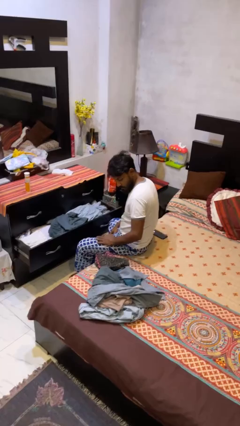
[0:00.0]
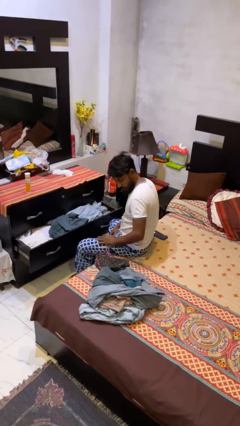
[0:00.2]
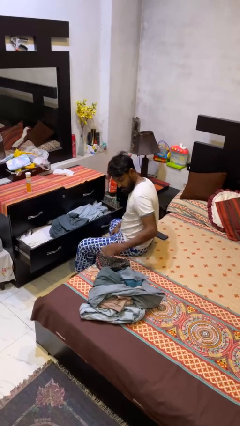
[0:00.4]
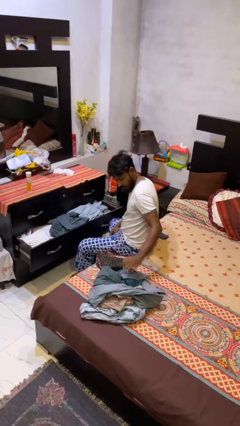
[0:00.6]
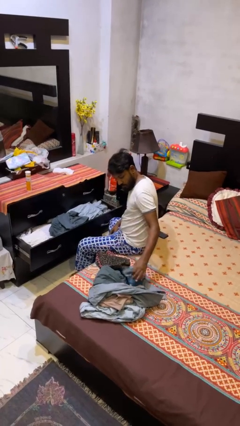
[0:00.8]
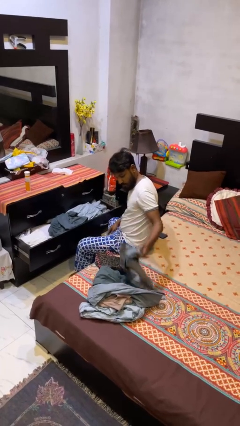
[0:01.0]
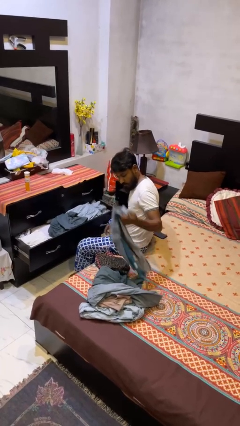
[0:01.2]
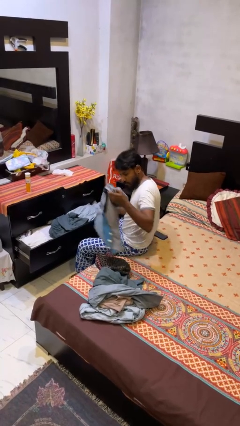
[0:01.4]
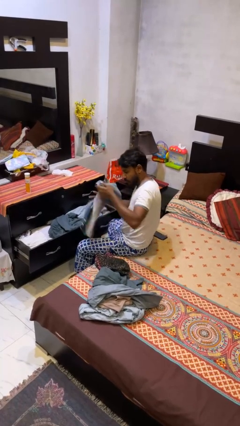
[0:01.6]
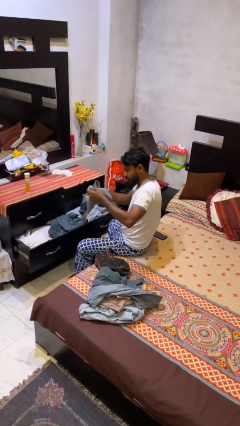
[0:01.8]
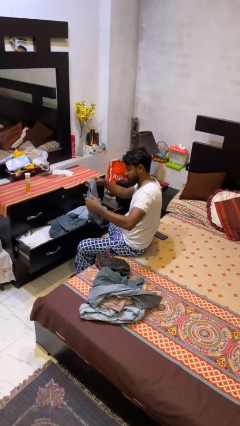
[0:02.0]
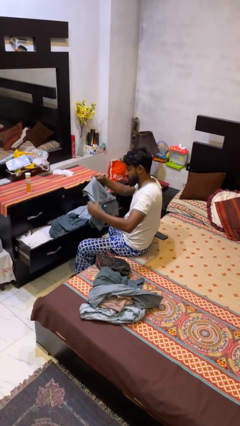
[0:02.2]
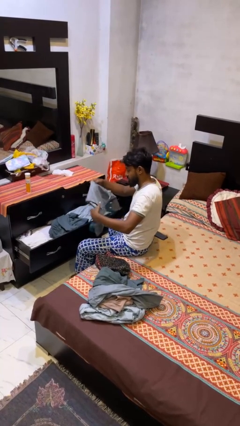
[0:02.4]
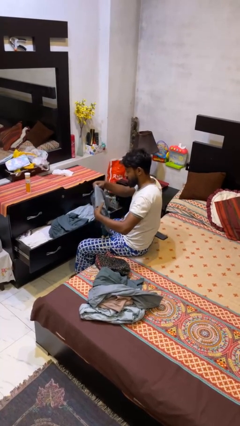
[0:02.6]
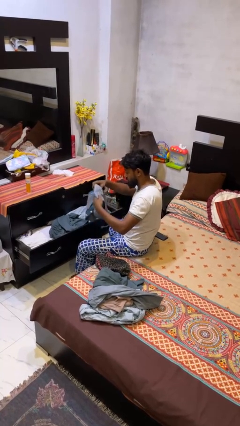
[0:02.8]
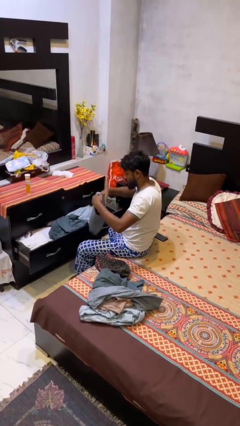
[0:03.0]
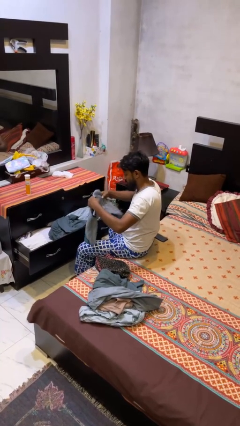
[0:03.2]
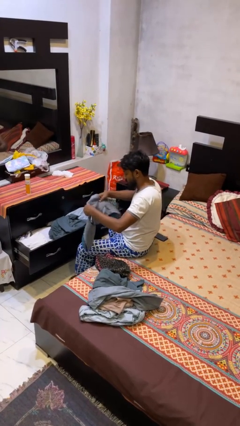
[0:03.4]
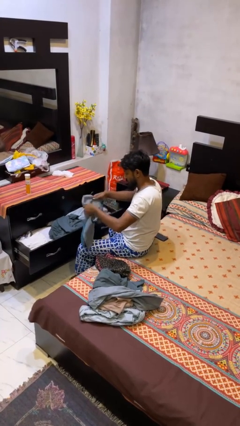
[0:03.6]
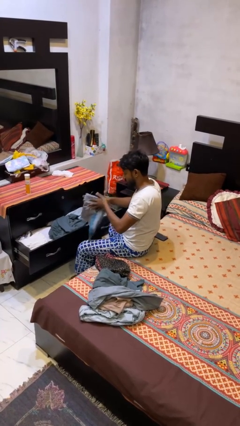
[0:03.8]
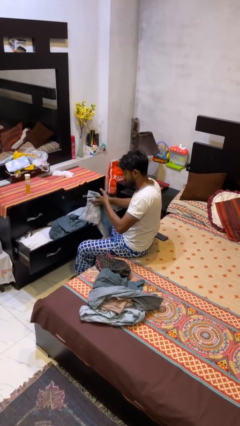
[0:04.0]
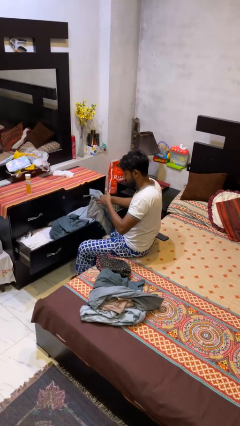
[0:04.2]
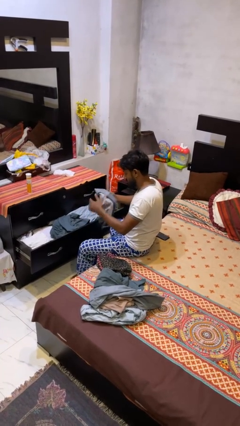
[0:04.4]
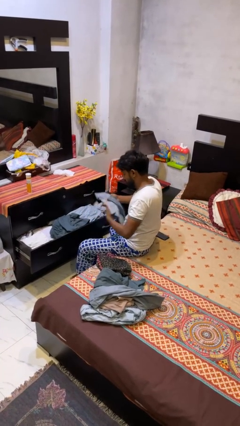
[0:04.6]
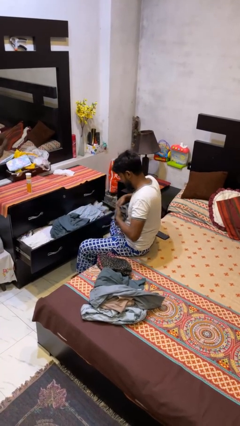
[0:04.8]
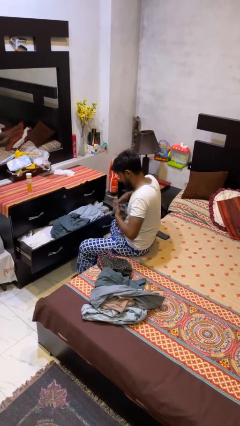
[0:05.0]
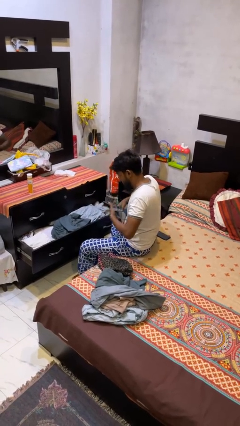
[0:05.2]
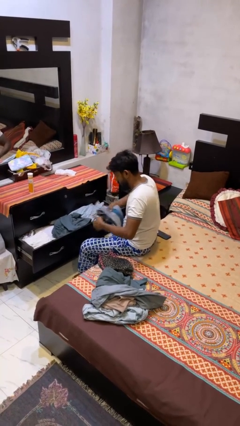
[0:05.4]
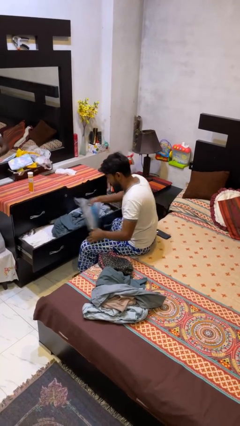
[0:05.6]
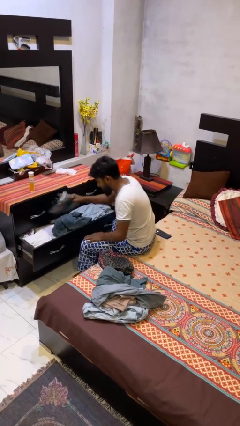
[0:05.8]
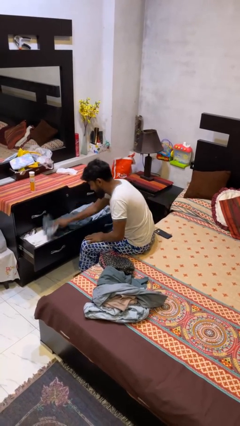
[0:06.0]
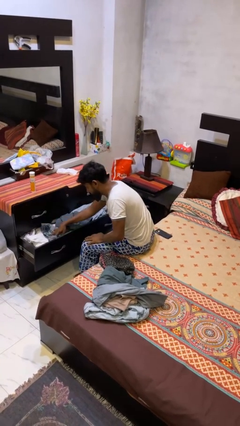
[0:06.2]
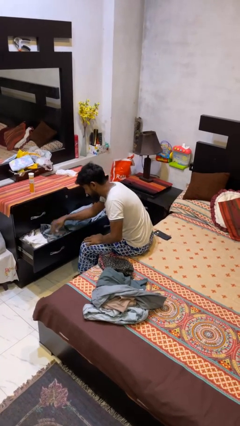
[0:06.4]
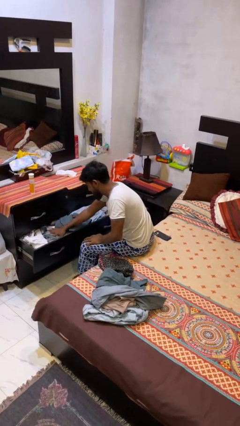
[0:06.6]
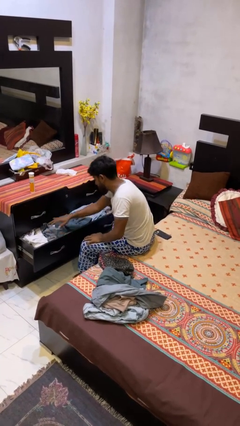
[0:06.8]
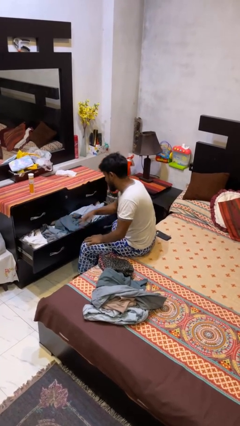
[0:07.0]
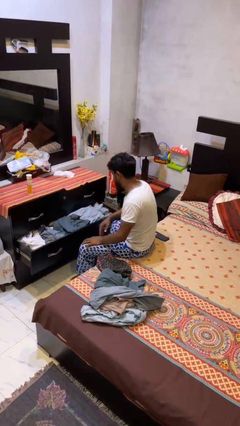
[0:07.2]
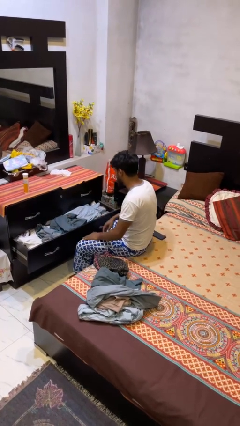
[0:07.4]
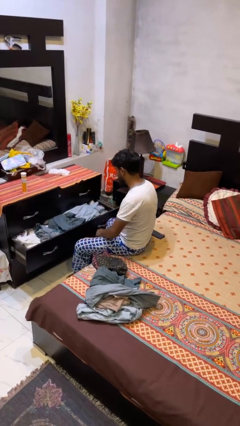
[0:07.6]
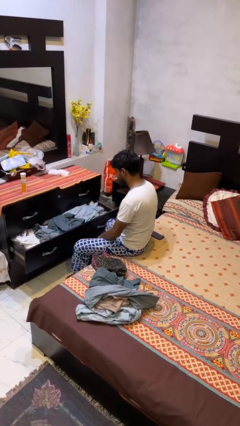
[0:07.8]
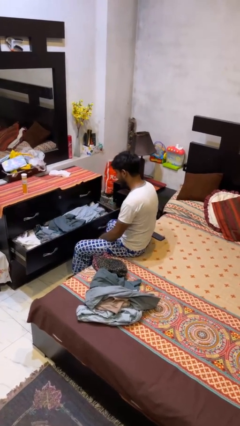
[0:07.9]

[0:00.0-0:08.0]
person puts clothes into dresser

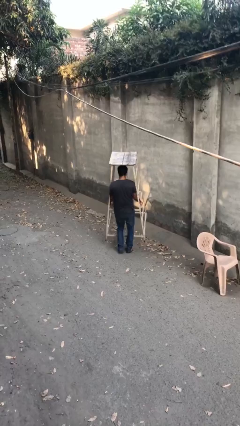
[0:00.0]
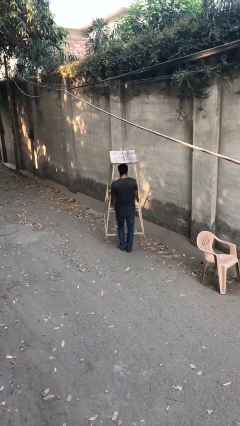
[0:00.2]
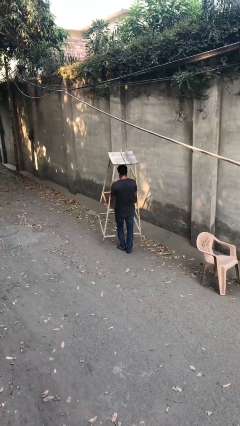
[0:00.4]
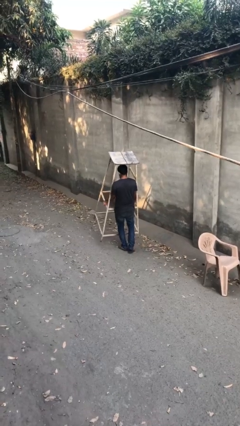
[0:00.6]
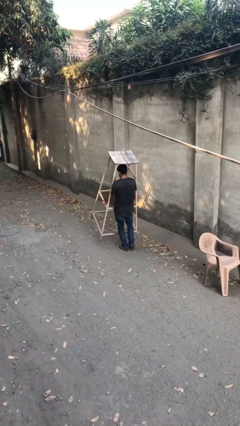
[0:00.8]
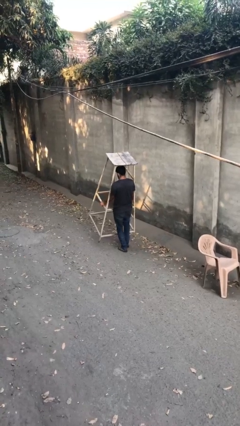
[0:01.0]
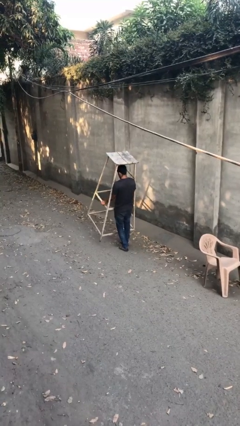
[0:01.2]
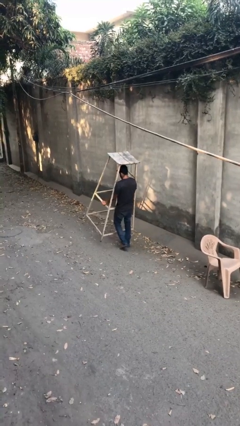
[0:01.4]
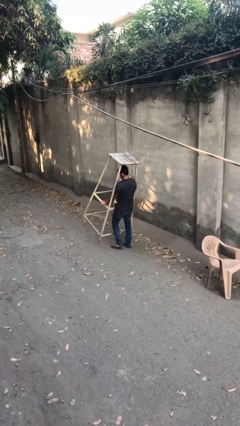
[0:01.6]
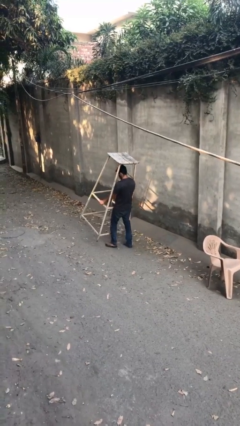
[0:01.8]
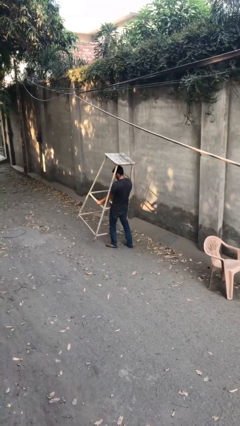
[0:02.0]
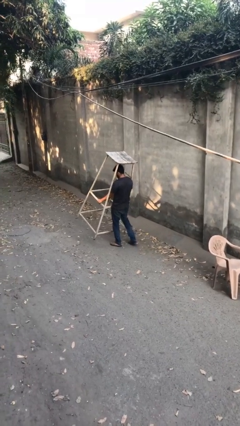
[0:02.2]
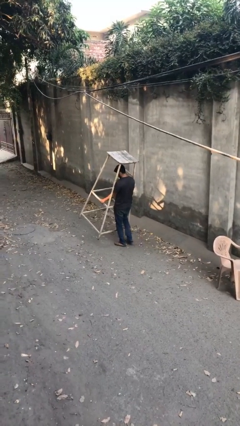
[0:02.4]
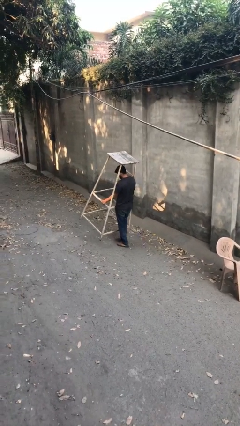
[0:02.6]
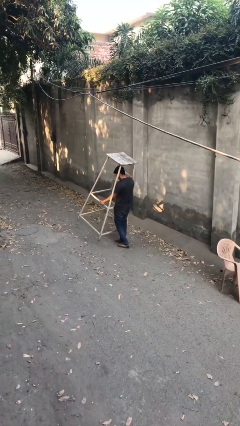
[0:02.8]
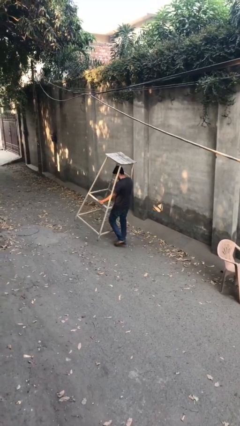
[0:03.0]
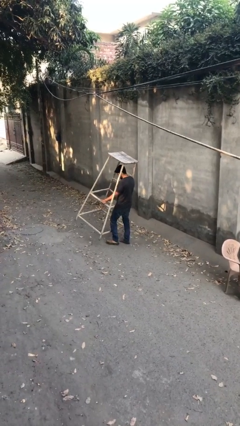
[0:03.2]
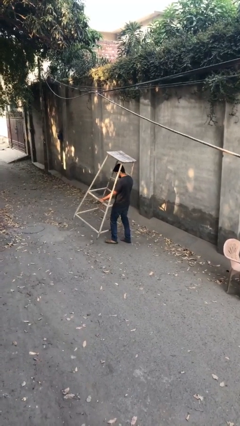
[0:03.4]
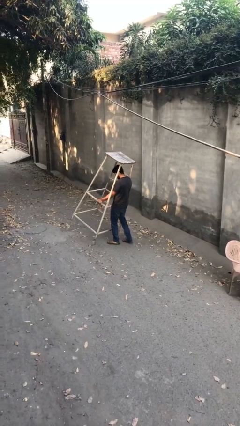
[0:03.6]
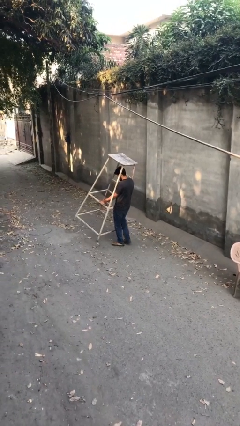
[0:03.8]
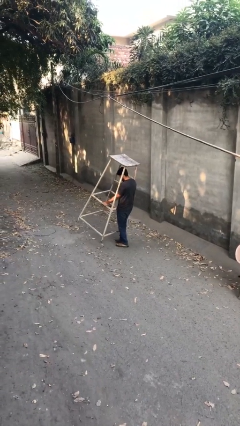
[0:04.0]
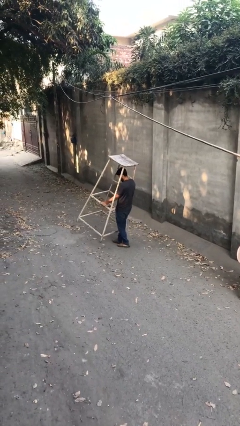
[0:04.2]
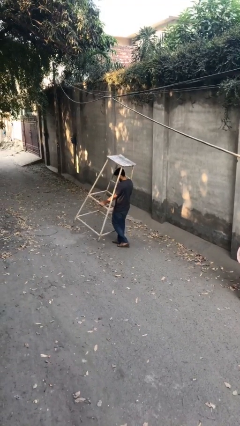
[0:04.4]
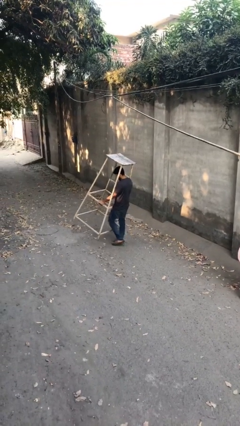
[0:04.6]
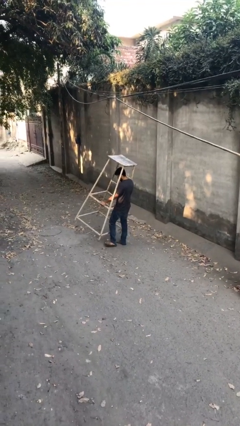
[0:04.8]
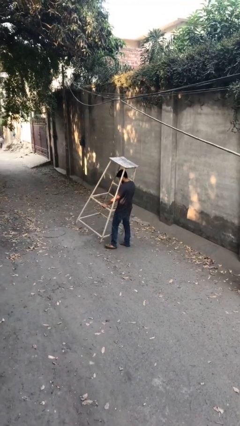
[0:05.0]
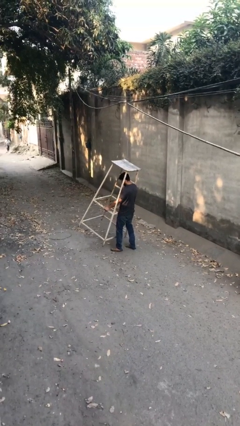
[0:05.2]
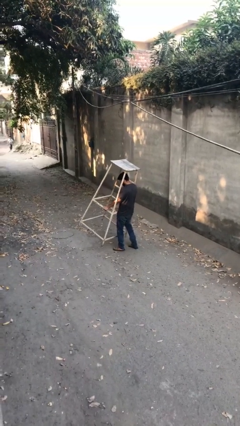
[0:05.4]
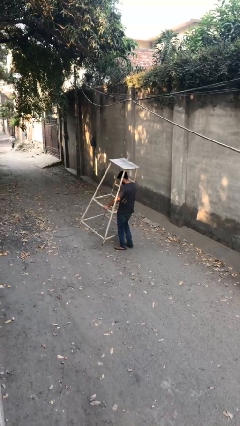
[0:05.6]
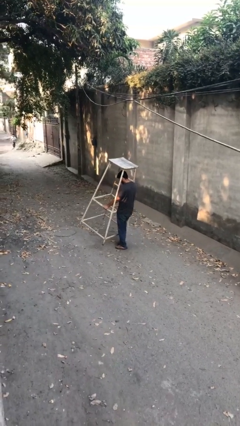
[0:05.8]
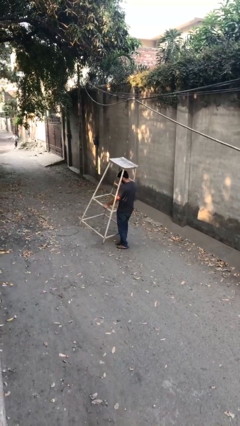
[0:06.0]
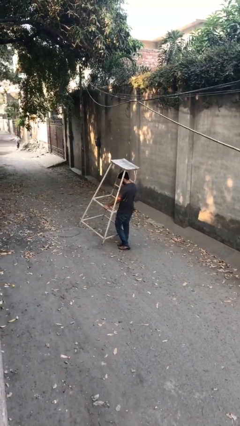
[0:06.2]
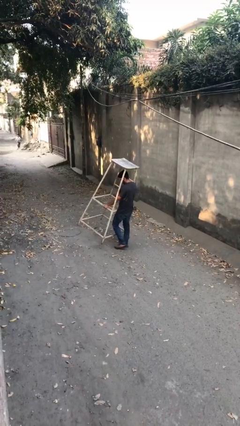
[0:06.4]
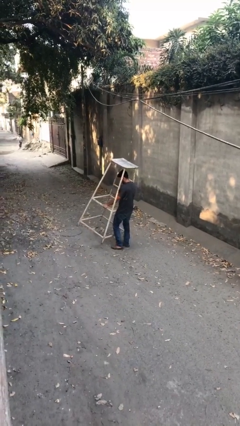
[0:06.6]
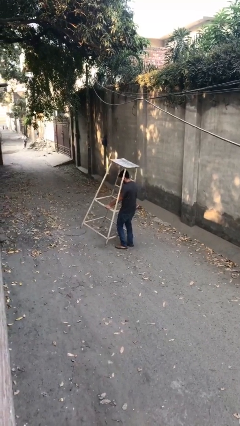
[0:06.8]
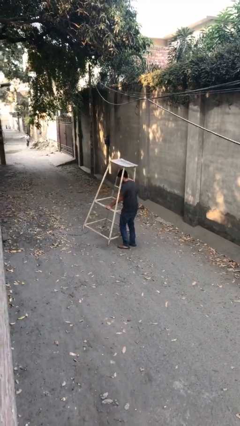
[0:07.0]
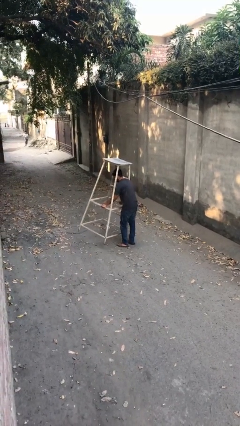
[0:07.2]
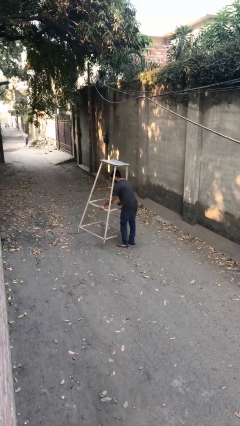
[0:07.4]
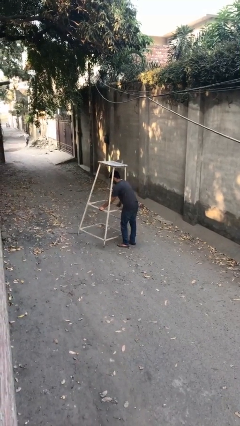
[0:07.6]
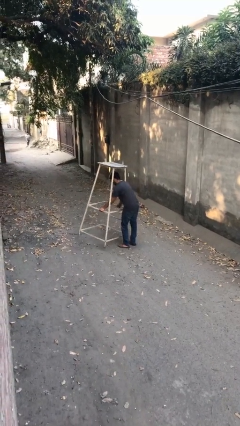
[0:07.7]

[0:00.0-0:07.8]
person carries heavy object

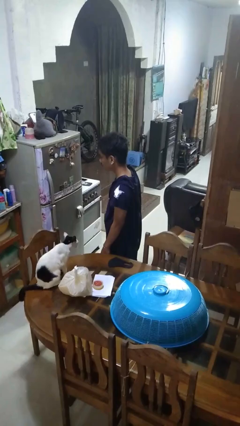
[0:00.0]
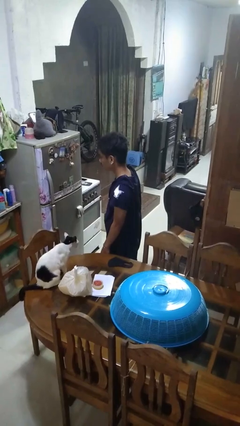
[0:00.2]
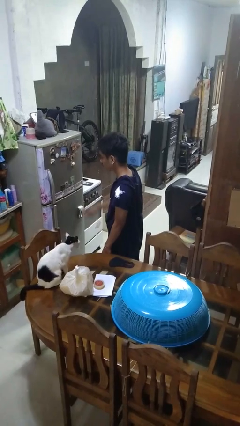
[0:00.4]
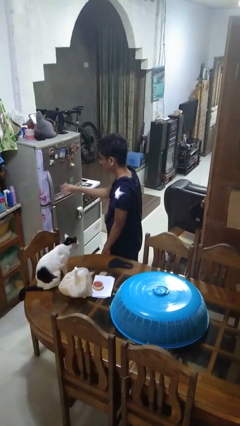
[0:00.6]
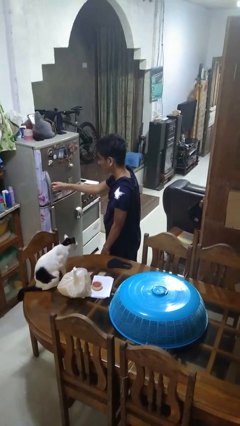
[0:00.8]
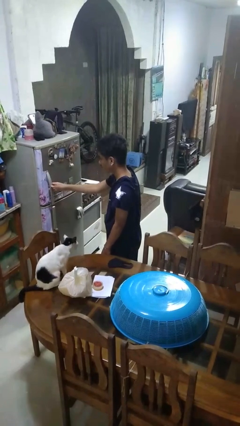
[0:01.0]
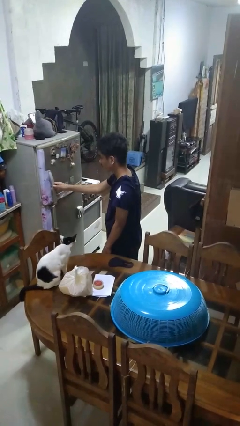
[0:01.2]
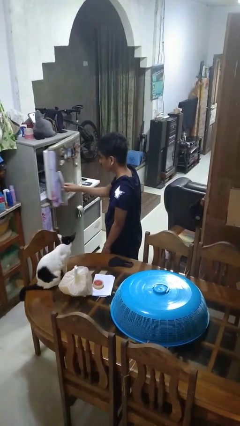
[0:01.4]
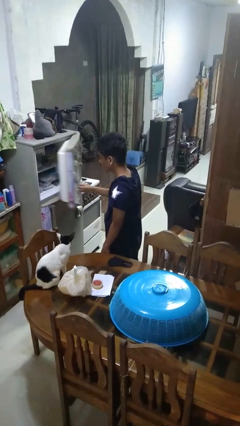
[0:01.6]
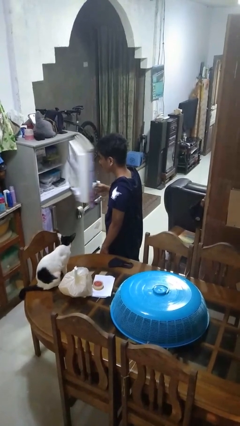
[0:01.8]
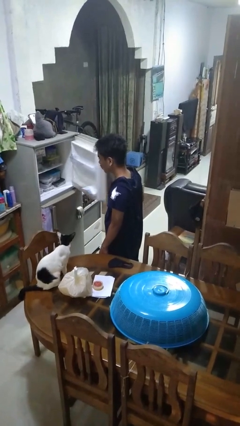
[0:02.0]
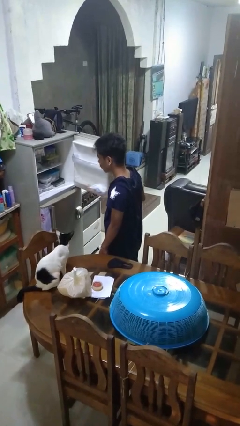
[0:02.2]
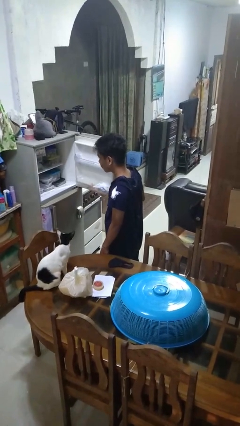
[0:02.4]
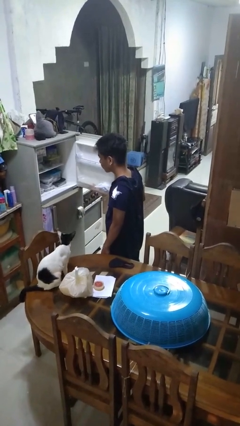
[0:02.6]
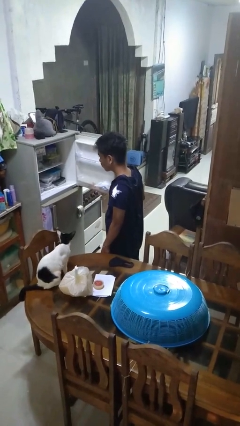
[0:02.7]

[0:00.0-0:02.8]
person opens refrigerator
